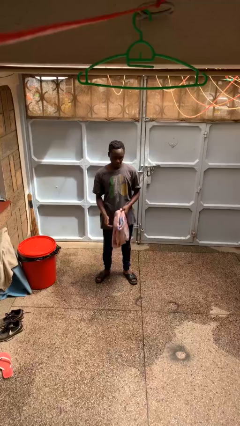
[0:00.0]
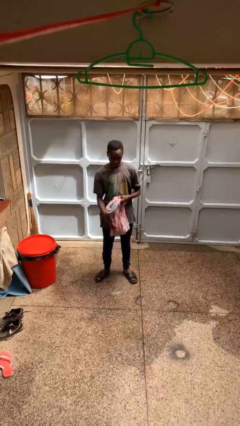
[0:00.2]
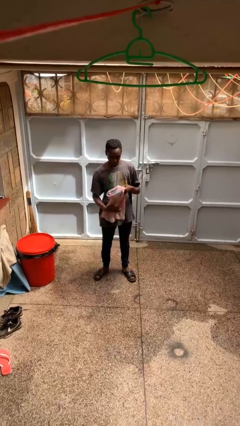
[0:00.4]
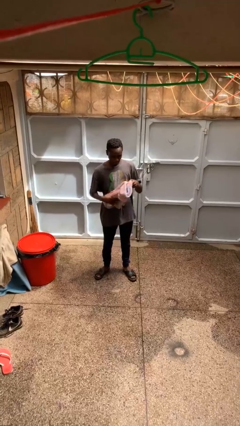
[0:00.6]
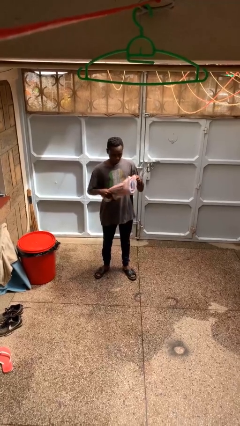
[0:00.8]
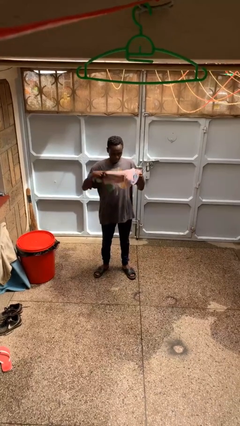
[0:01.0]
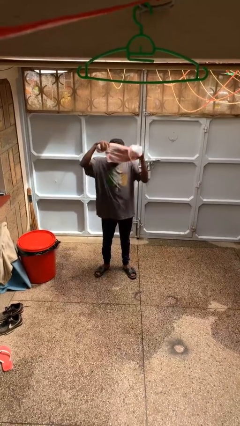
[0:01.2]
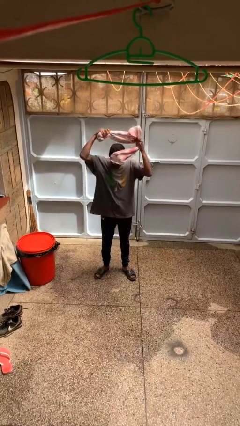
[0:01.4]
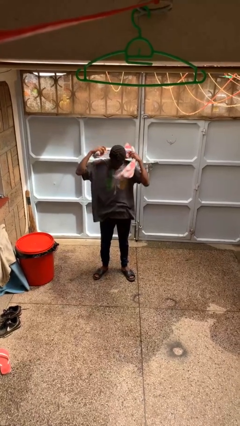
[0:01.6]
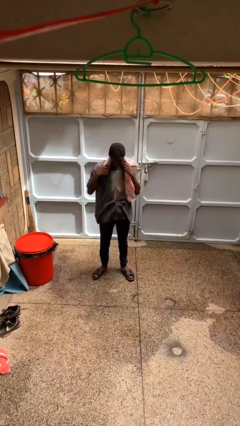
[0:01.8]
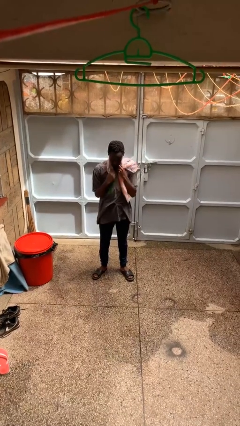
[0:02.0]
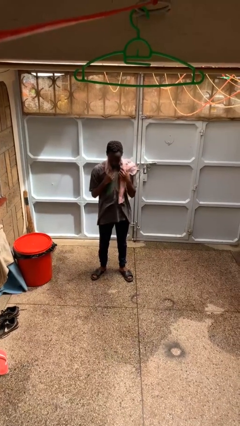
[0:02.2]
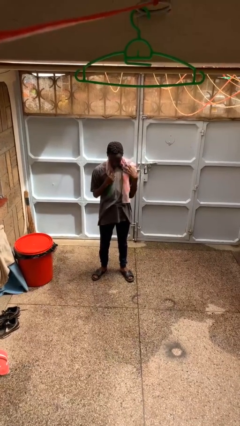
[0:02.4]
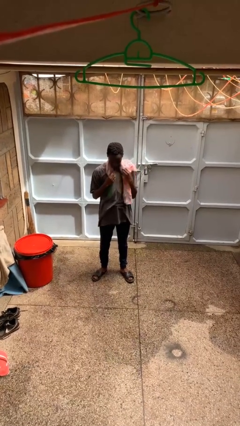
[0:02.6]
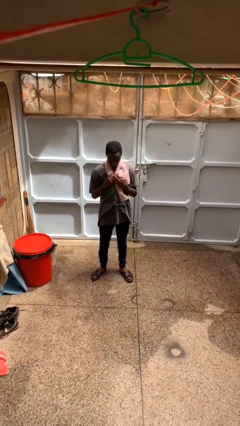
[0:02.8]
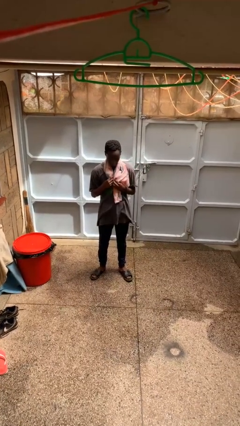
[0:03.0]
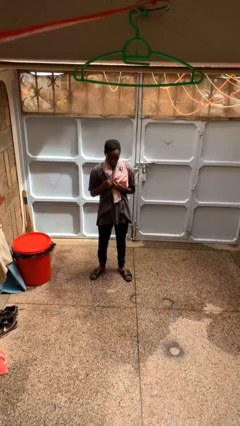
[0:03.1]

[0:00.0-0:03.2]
person puts on scarf

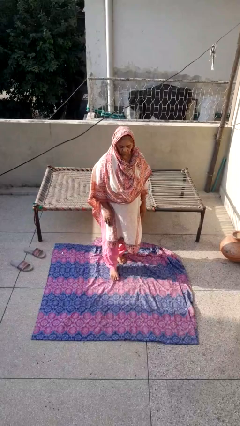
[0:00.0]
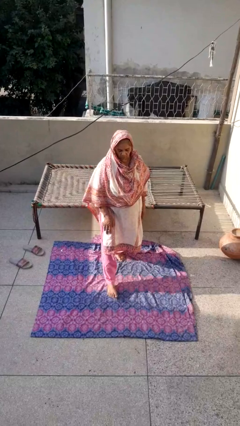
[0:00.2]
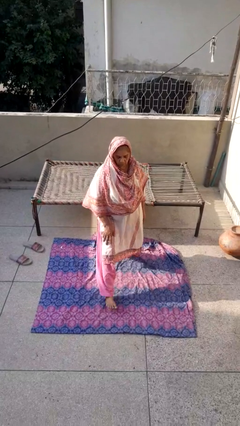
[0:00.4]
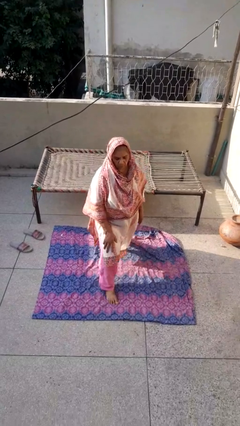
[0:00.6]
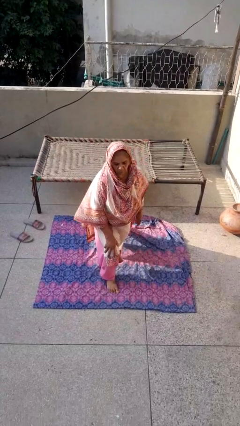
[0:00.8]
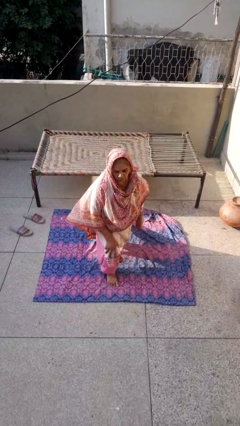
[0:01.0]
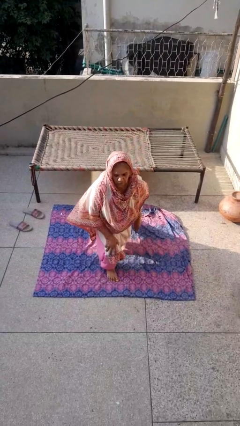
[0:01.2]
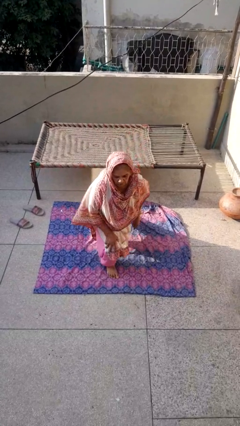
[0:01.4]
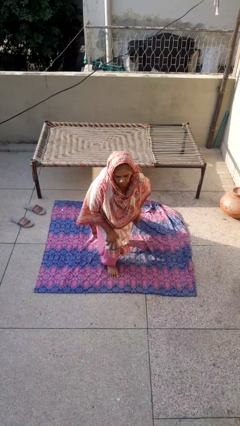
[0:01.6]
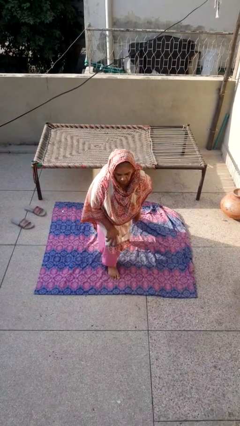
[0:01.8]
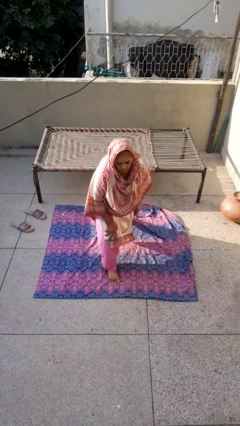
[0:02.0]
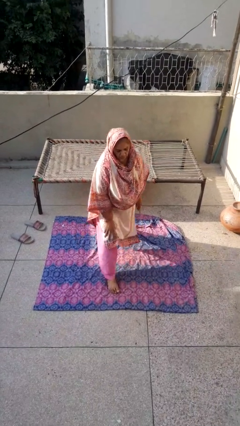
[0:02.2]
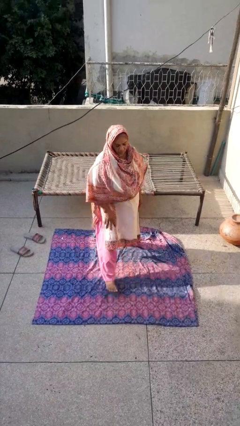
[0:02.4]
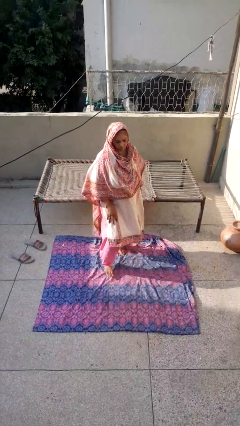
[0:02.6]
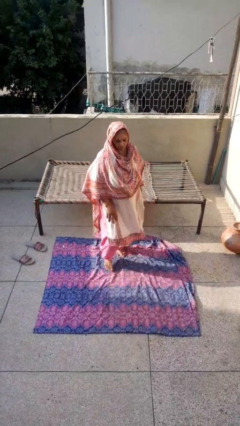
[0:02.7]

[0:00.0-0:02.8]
person exercises with lunges

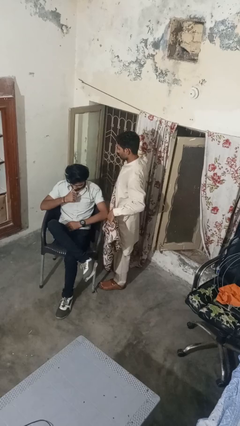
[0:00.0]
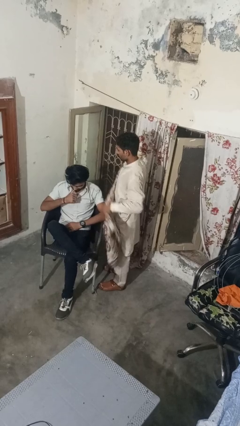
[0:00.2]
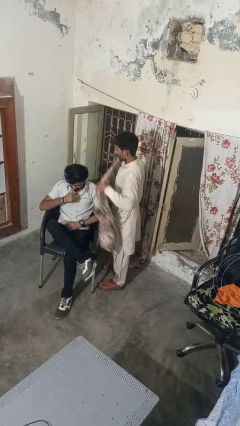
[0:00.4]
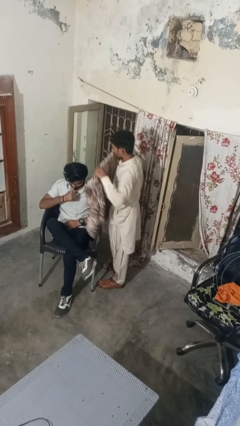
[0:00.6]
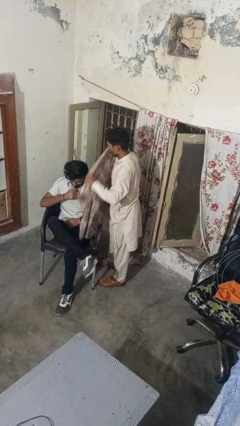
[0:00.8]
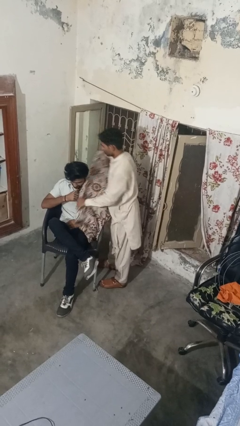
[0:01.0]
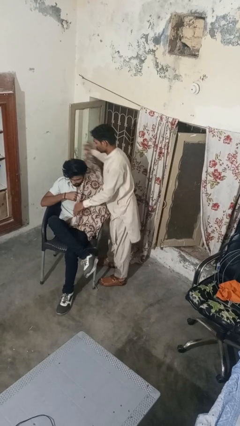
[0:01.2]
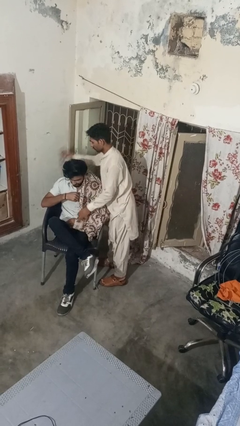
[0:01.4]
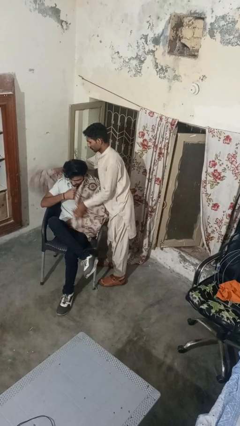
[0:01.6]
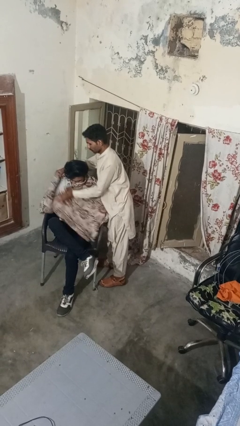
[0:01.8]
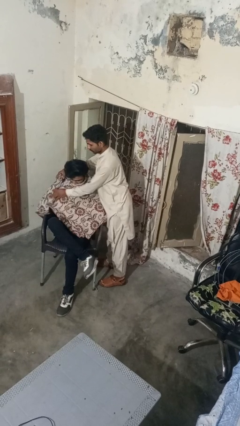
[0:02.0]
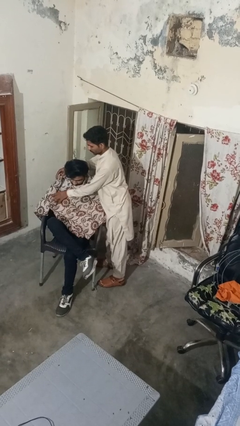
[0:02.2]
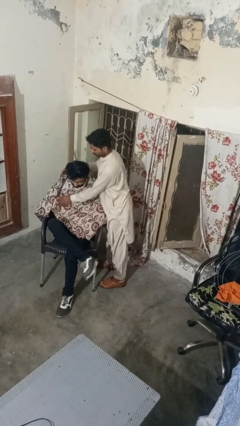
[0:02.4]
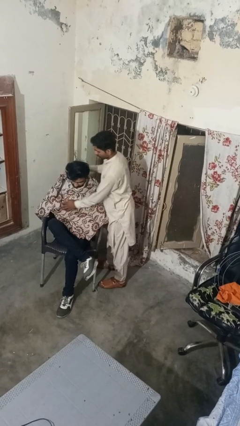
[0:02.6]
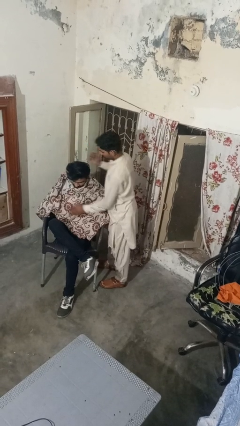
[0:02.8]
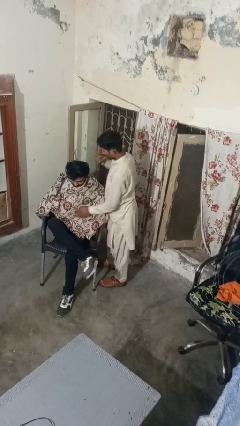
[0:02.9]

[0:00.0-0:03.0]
person covers friend with blanket

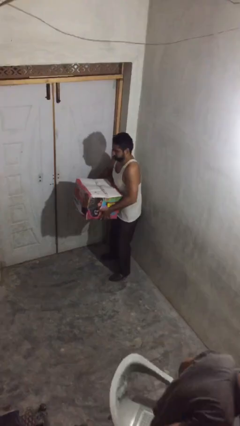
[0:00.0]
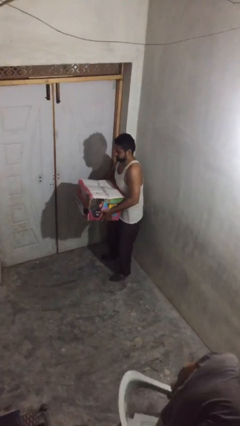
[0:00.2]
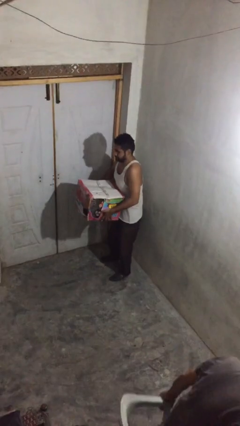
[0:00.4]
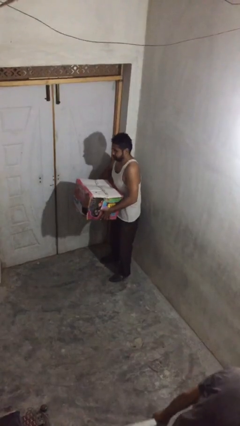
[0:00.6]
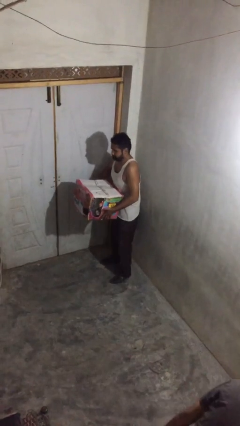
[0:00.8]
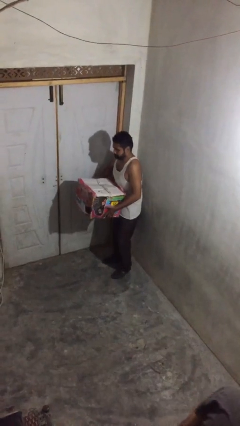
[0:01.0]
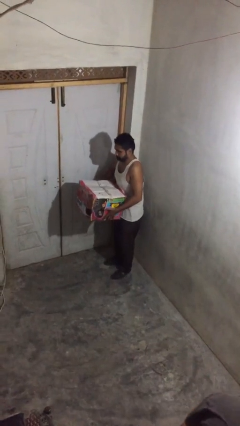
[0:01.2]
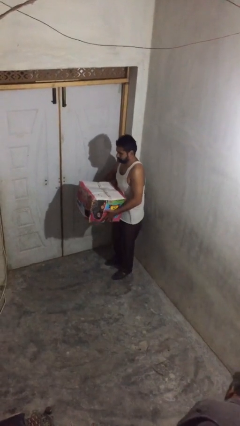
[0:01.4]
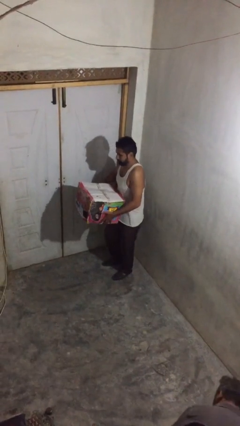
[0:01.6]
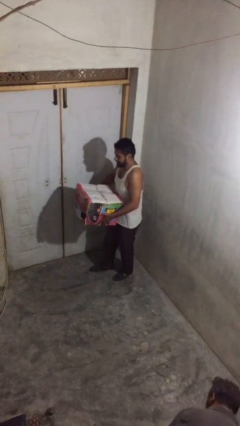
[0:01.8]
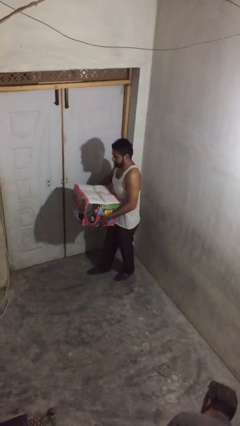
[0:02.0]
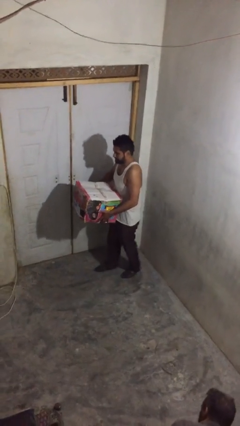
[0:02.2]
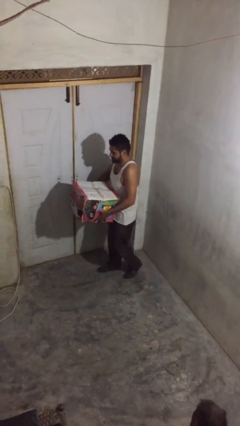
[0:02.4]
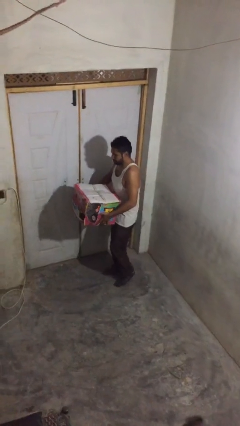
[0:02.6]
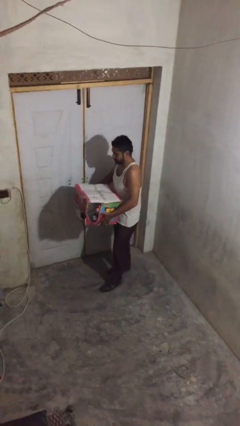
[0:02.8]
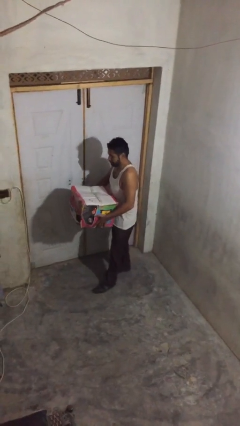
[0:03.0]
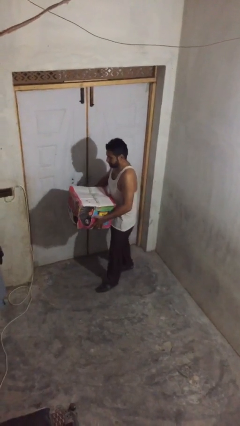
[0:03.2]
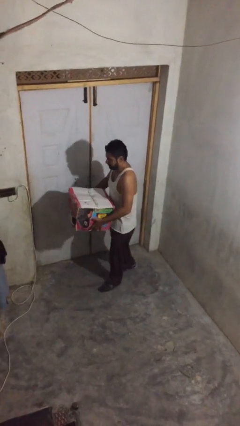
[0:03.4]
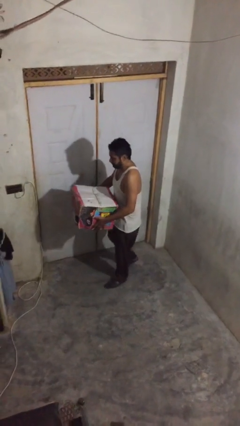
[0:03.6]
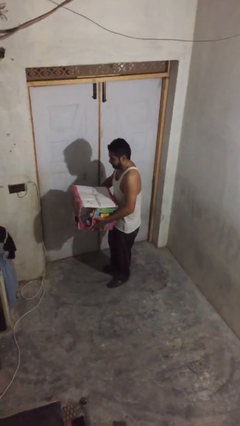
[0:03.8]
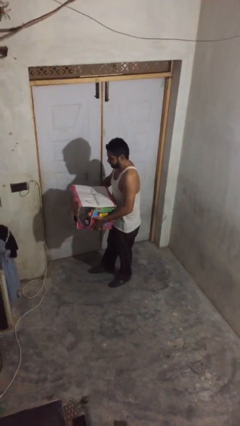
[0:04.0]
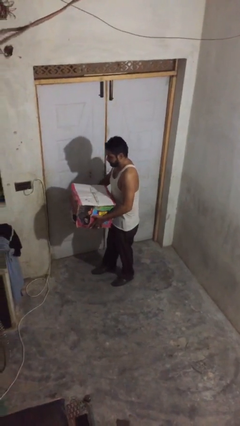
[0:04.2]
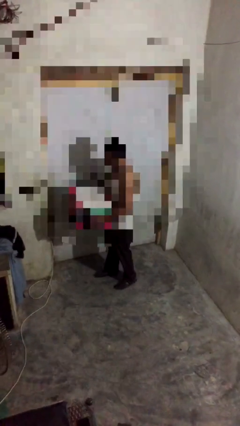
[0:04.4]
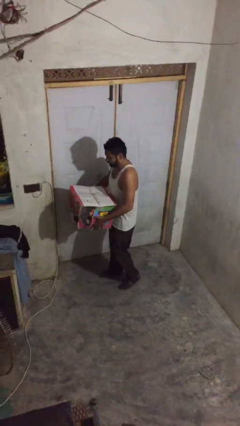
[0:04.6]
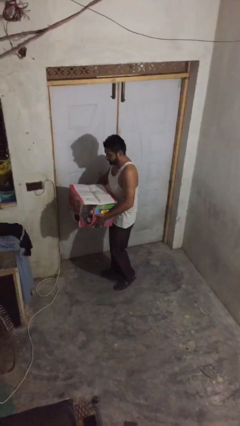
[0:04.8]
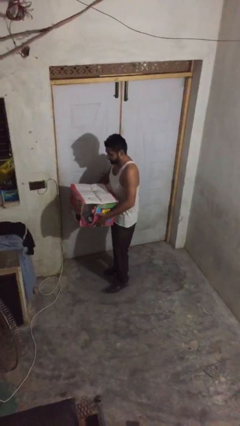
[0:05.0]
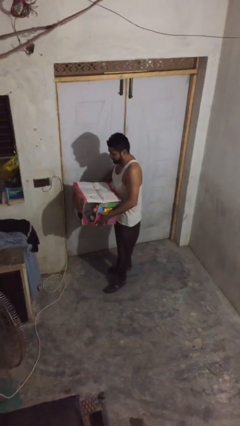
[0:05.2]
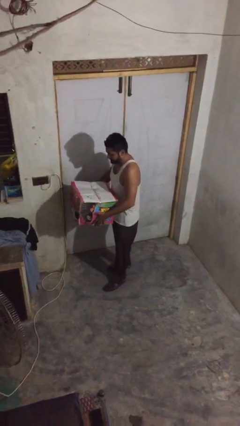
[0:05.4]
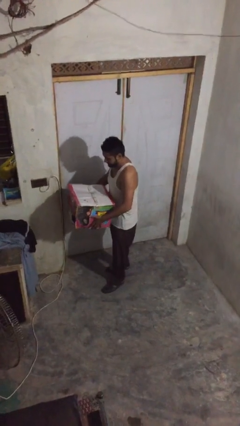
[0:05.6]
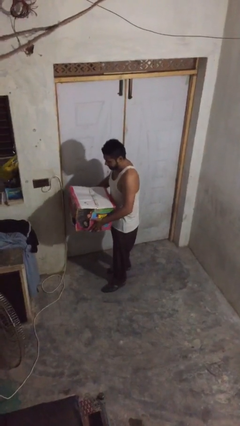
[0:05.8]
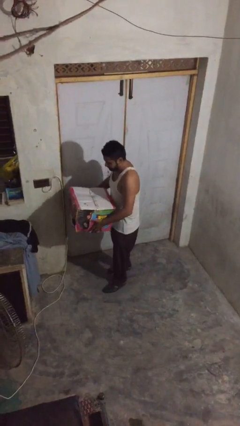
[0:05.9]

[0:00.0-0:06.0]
person carries heavy object

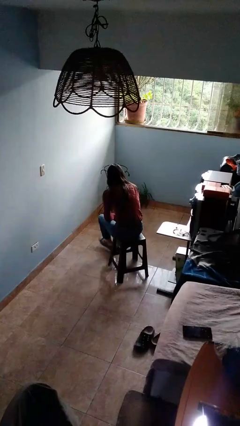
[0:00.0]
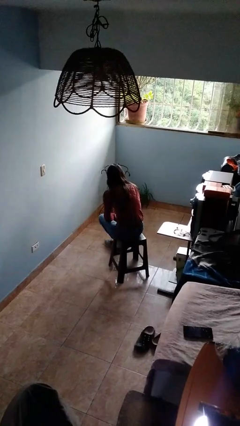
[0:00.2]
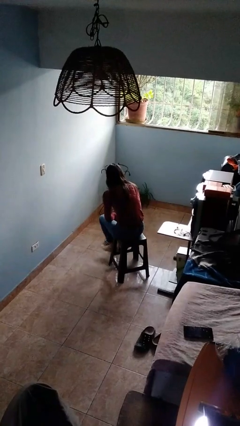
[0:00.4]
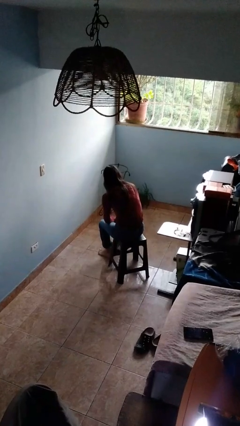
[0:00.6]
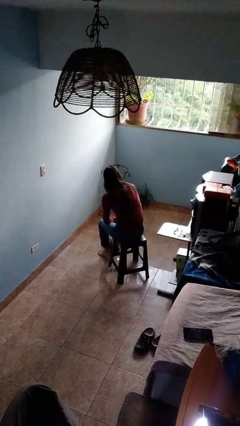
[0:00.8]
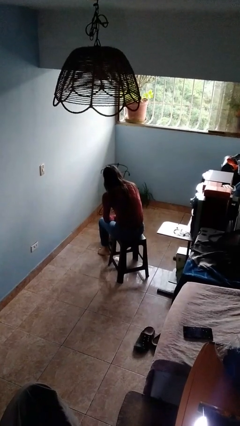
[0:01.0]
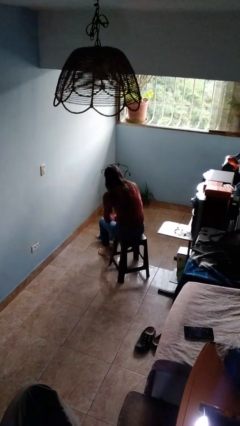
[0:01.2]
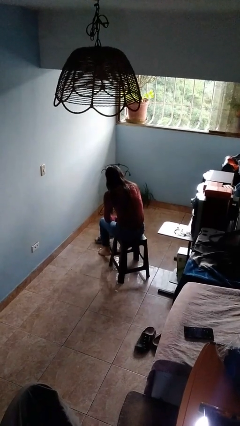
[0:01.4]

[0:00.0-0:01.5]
person takes off shoes

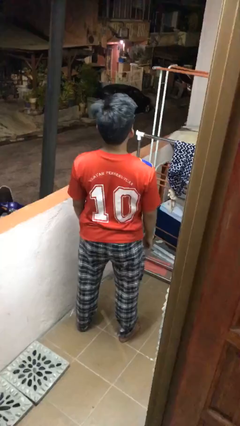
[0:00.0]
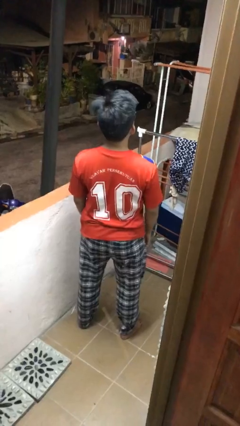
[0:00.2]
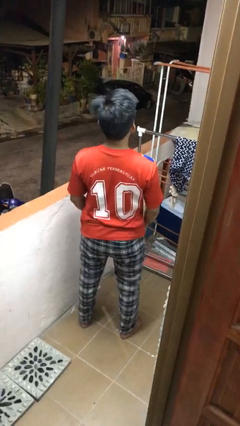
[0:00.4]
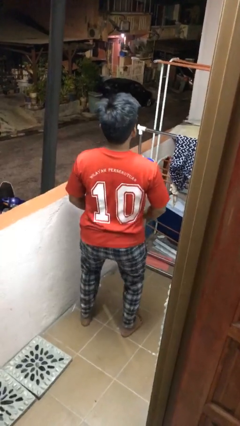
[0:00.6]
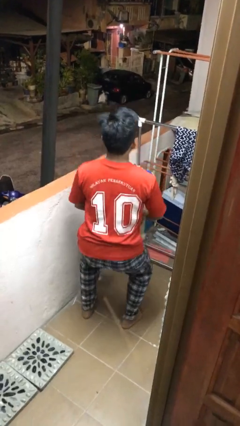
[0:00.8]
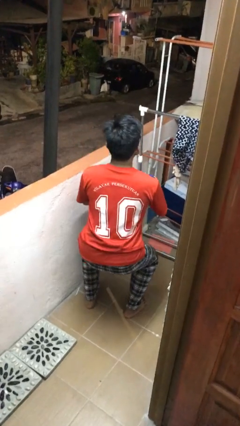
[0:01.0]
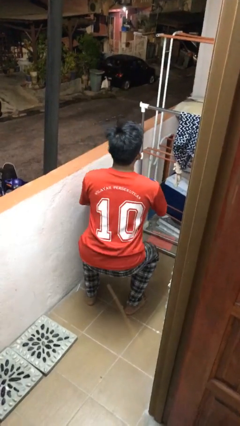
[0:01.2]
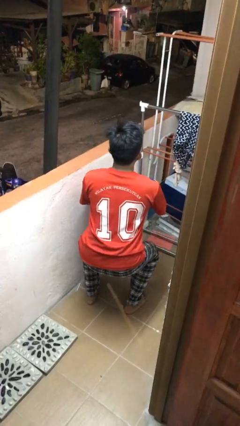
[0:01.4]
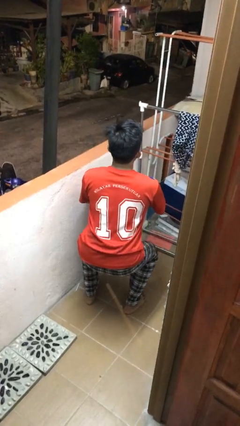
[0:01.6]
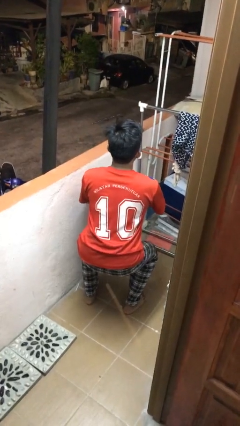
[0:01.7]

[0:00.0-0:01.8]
person squats
